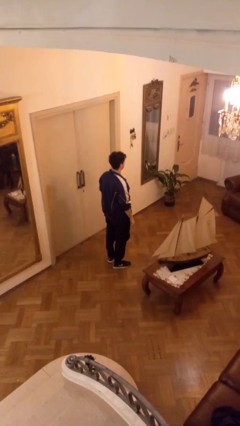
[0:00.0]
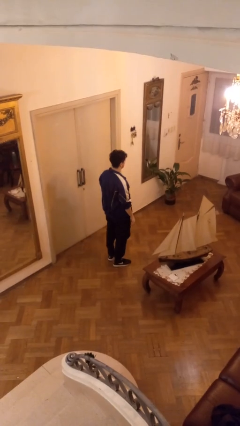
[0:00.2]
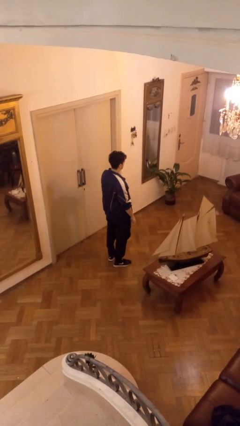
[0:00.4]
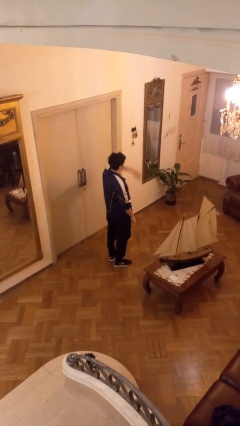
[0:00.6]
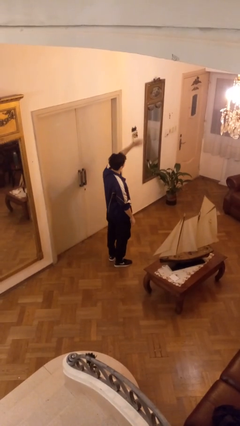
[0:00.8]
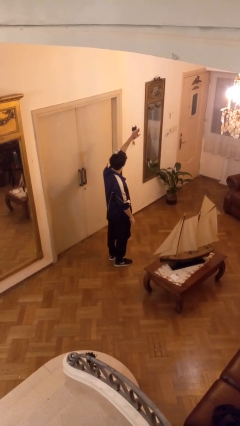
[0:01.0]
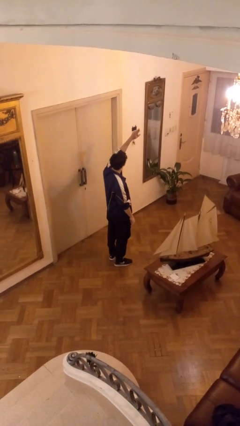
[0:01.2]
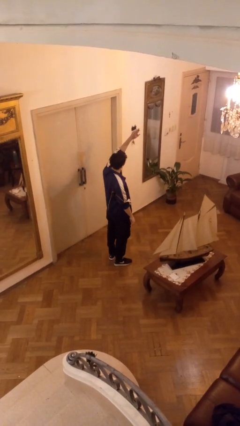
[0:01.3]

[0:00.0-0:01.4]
person gestures swipe up

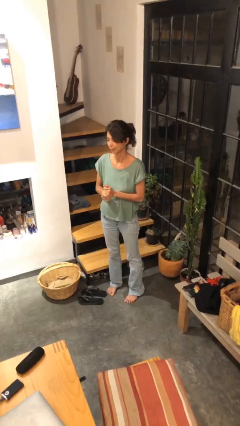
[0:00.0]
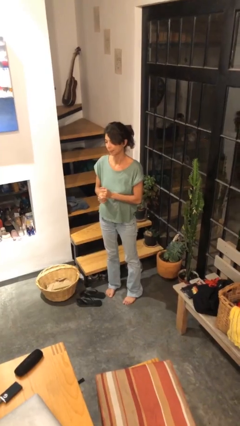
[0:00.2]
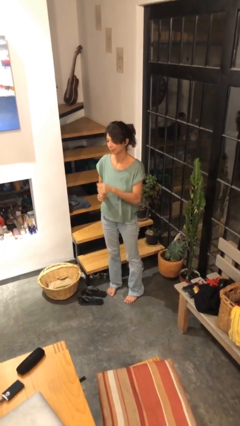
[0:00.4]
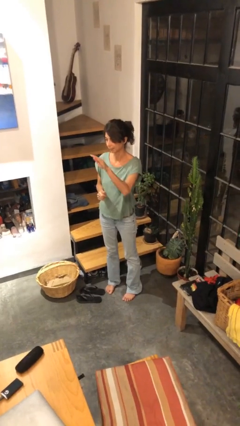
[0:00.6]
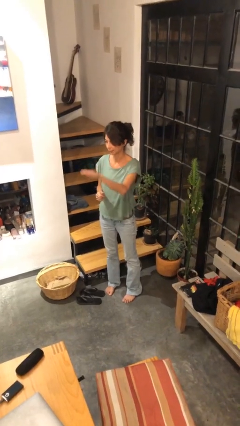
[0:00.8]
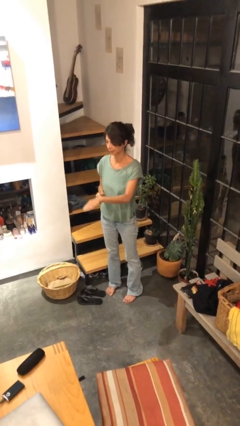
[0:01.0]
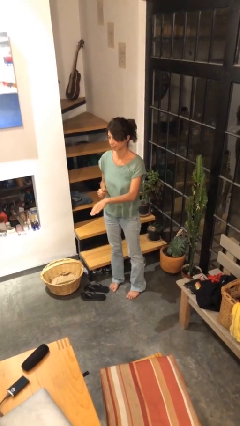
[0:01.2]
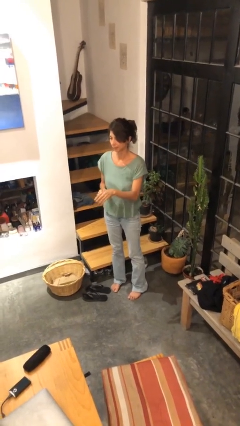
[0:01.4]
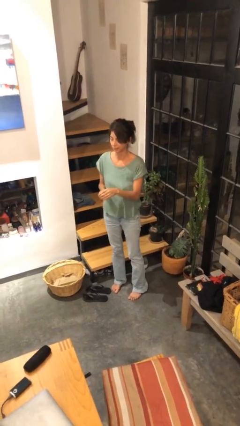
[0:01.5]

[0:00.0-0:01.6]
person gestures swipe down

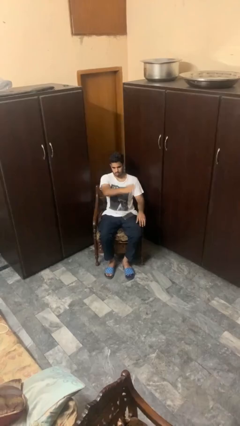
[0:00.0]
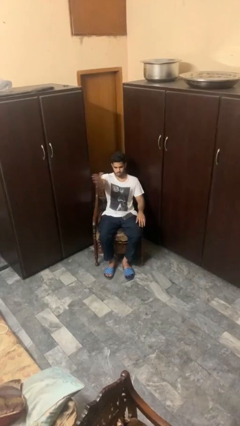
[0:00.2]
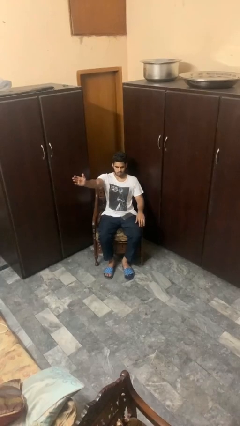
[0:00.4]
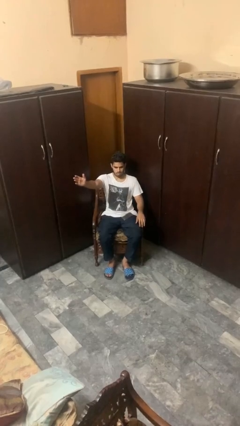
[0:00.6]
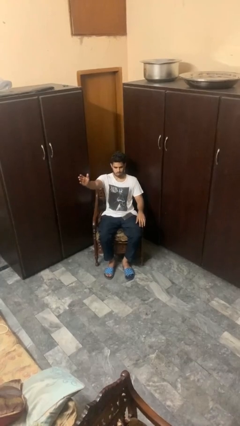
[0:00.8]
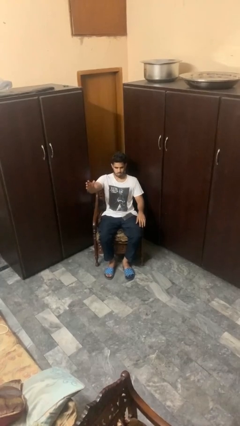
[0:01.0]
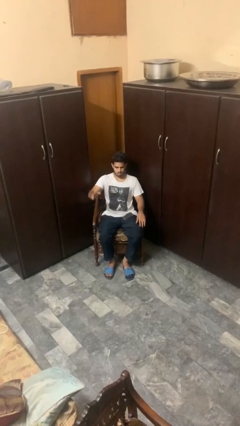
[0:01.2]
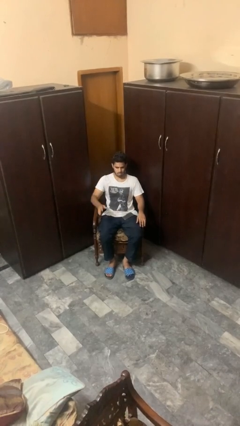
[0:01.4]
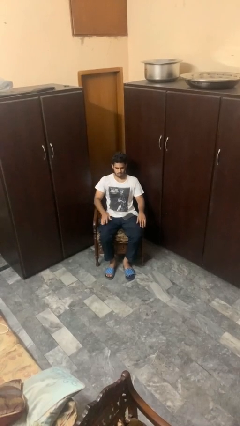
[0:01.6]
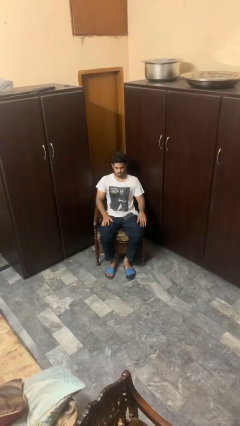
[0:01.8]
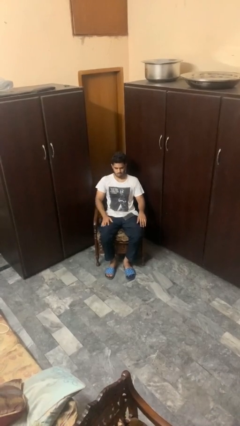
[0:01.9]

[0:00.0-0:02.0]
person gestures swipe right

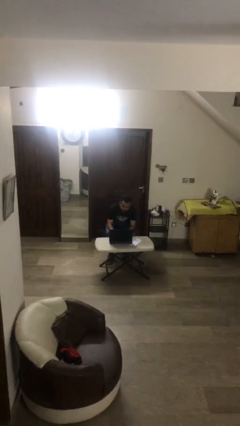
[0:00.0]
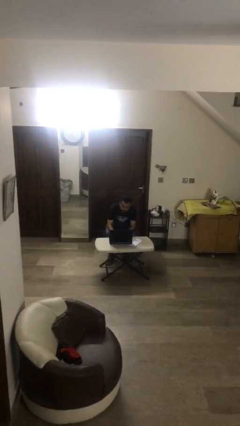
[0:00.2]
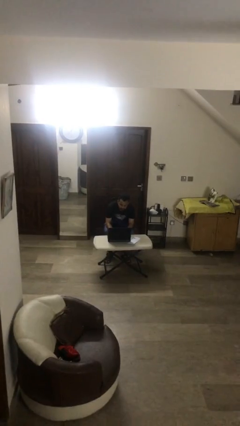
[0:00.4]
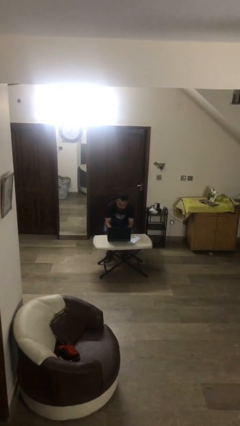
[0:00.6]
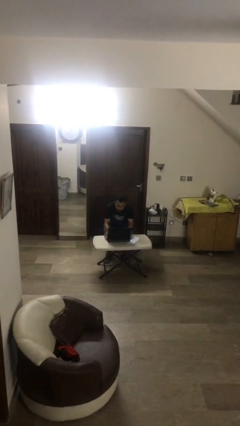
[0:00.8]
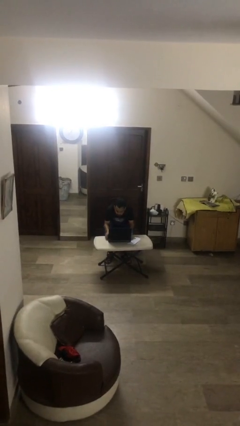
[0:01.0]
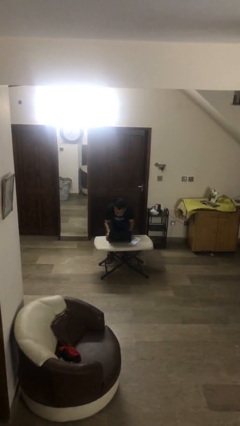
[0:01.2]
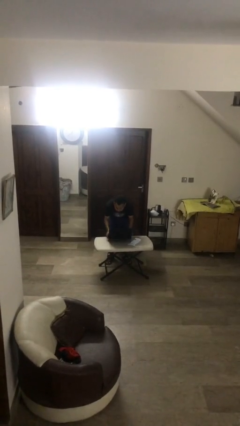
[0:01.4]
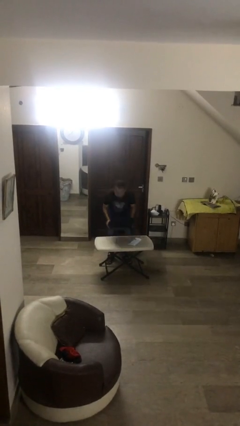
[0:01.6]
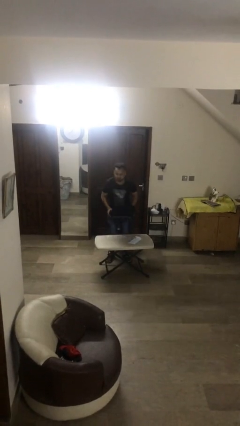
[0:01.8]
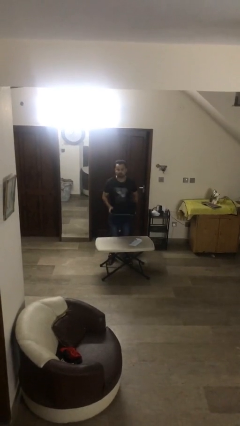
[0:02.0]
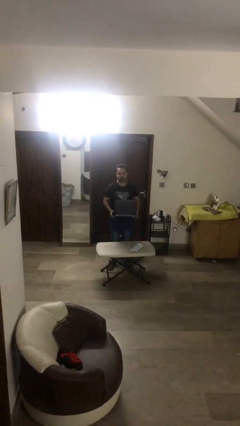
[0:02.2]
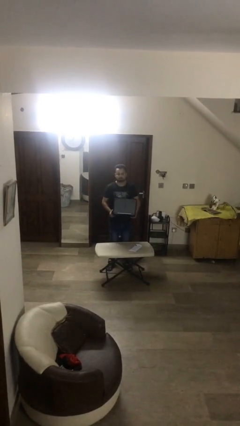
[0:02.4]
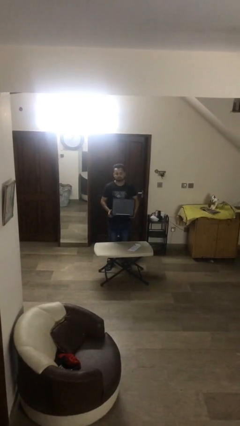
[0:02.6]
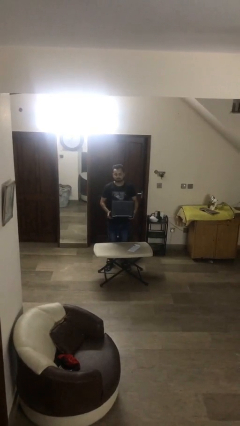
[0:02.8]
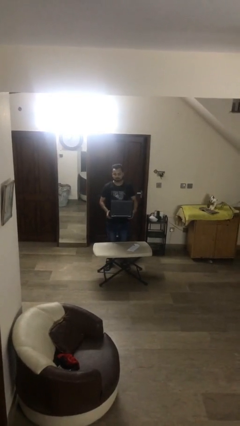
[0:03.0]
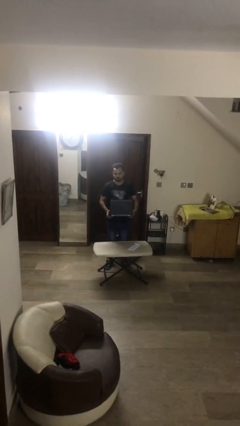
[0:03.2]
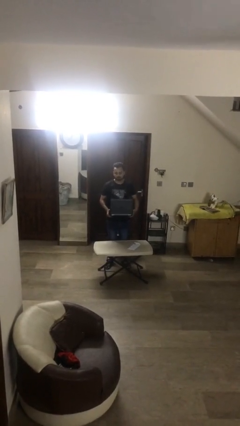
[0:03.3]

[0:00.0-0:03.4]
person stands up

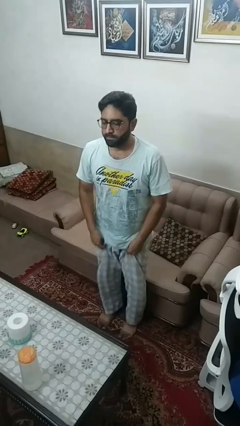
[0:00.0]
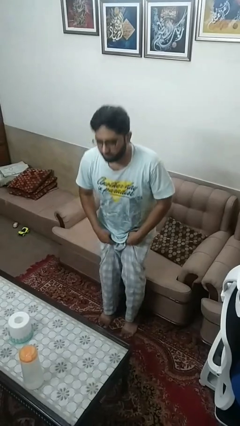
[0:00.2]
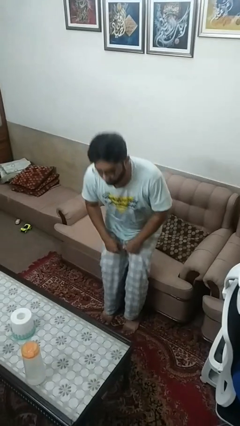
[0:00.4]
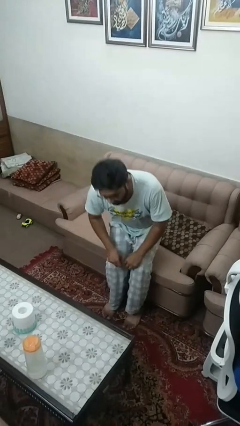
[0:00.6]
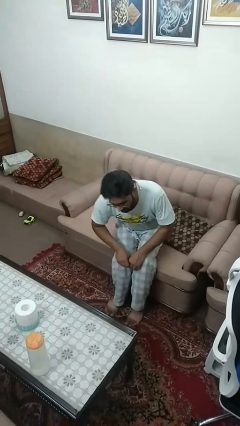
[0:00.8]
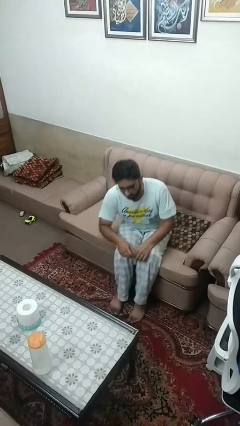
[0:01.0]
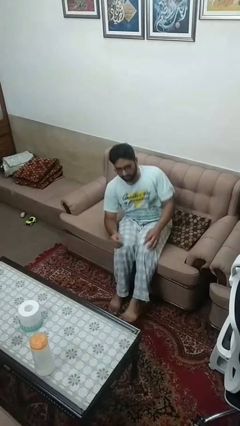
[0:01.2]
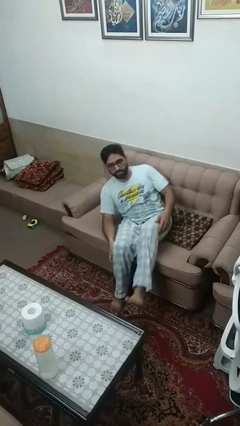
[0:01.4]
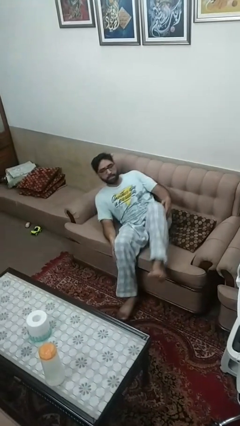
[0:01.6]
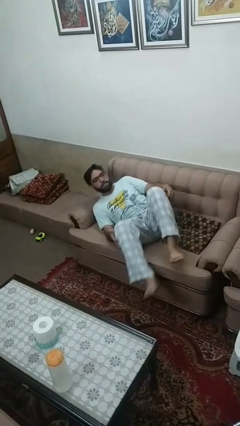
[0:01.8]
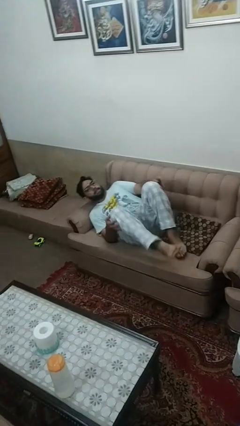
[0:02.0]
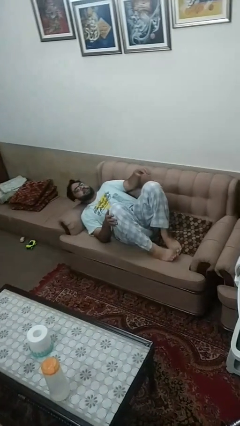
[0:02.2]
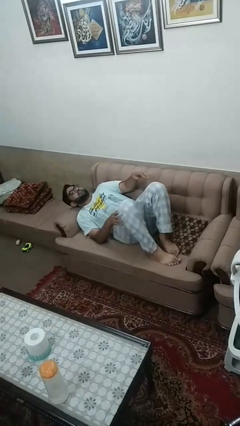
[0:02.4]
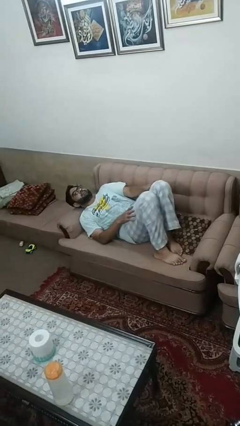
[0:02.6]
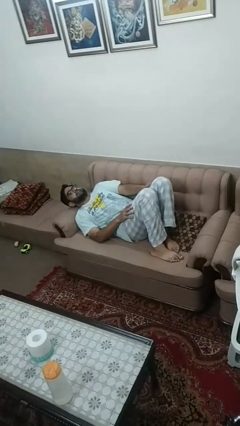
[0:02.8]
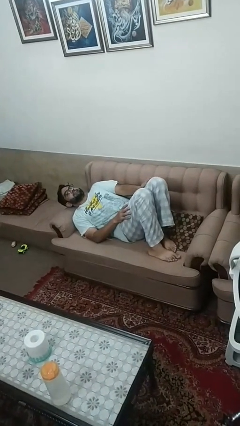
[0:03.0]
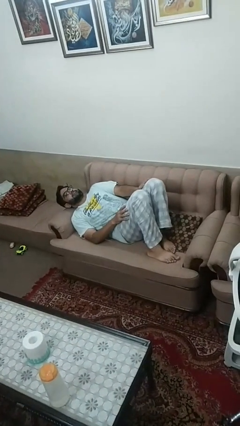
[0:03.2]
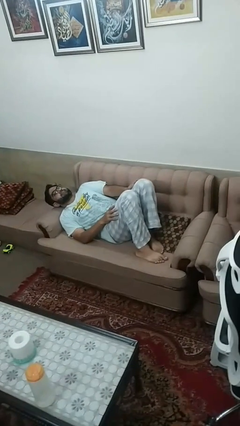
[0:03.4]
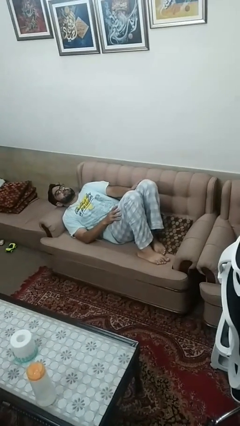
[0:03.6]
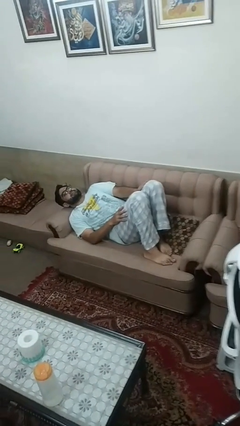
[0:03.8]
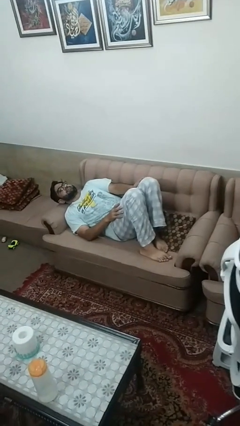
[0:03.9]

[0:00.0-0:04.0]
person lies down on couch

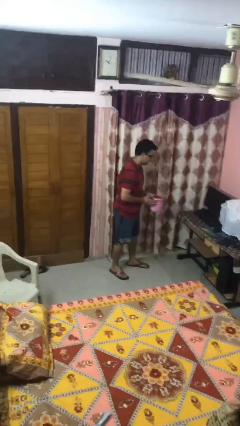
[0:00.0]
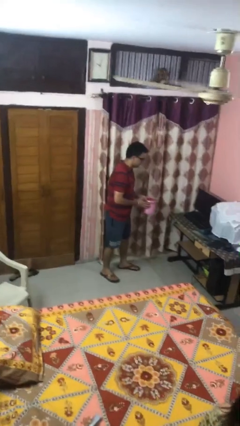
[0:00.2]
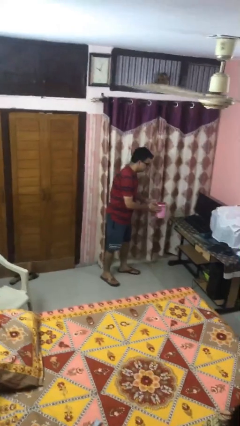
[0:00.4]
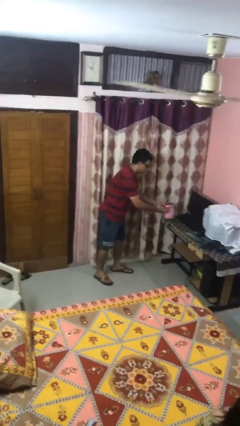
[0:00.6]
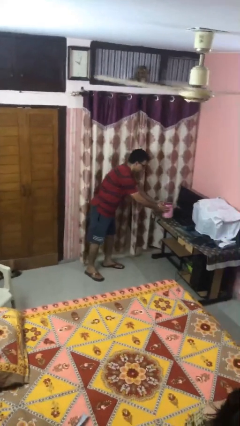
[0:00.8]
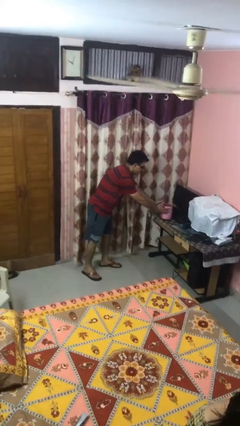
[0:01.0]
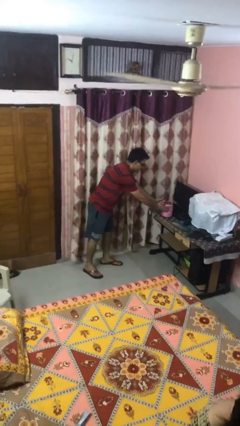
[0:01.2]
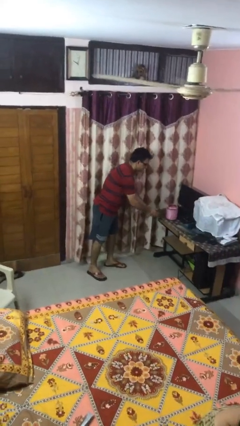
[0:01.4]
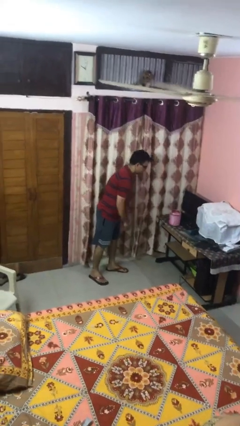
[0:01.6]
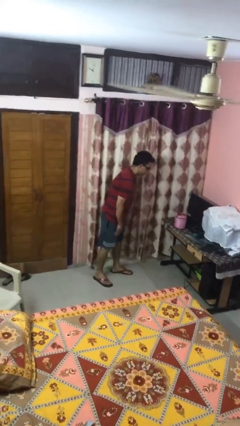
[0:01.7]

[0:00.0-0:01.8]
person puts down object on countertop

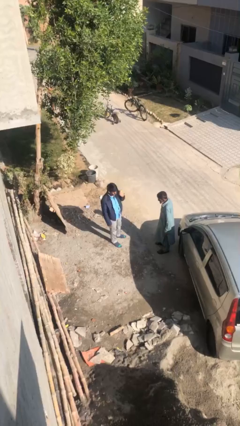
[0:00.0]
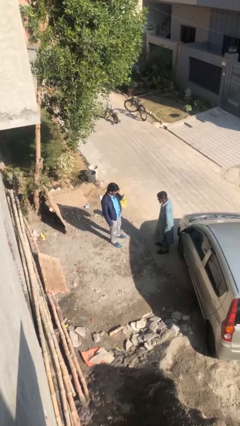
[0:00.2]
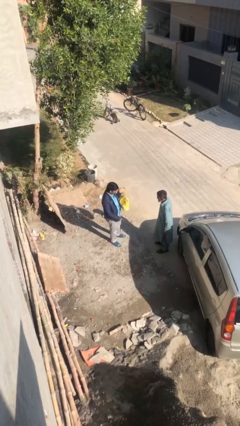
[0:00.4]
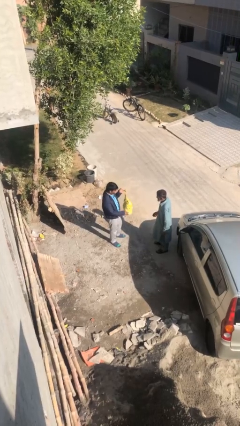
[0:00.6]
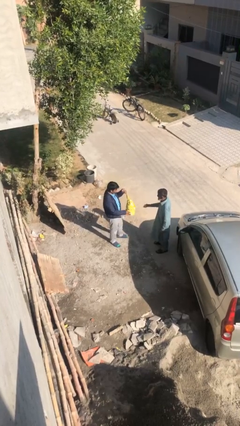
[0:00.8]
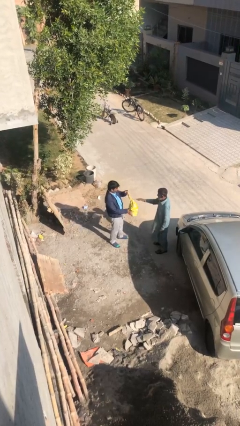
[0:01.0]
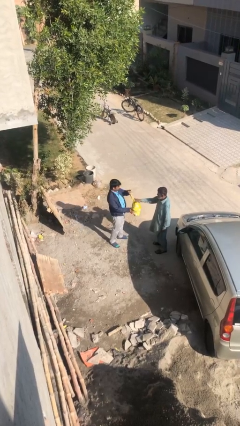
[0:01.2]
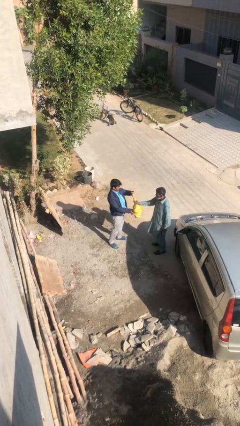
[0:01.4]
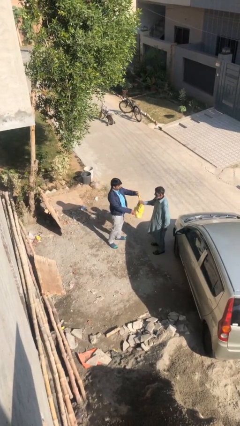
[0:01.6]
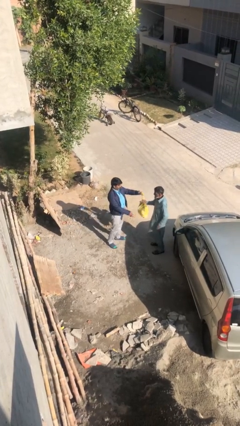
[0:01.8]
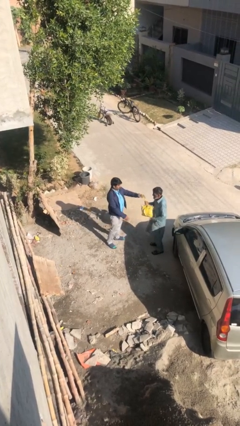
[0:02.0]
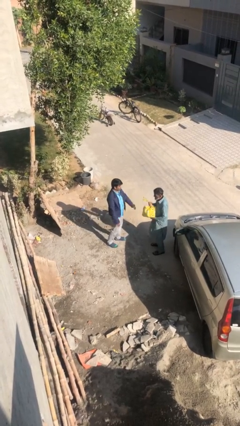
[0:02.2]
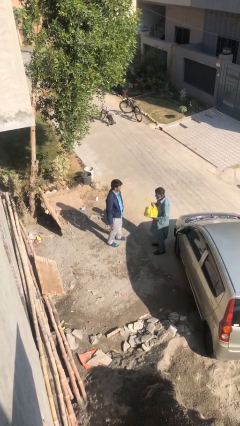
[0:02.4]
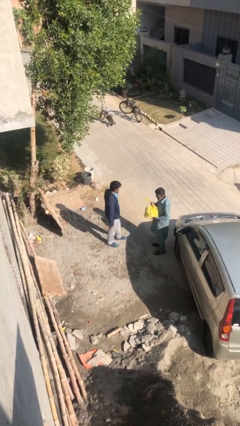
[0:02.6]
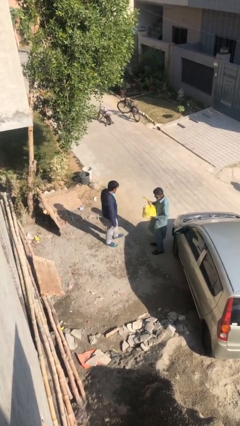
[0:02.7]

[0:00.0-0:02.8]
person transfers object to person

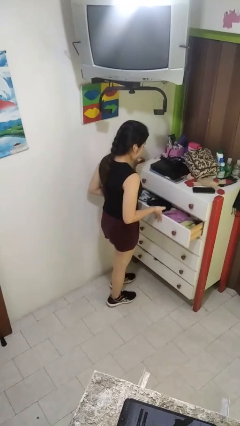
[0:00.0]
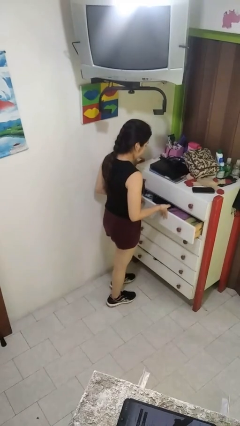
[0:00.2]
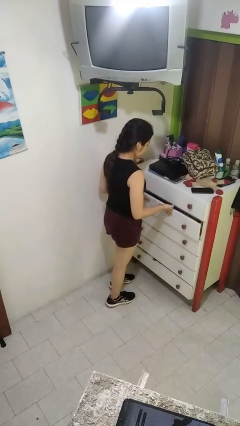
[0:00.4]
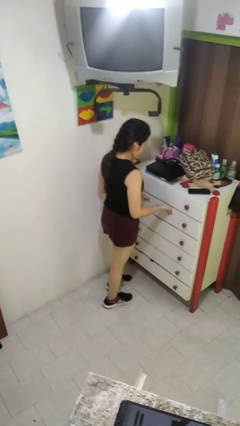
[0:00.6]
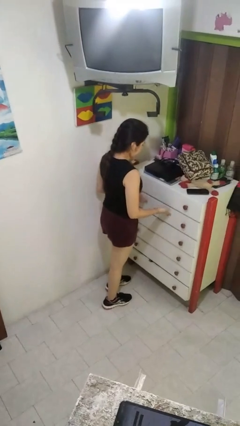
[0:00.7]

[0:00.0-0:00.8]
person closes dresser drawer
